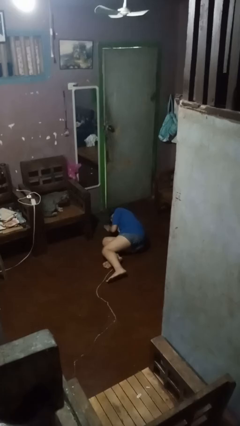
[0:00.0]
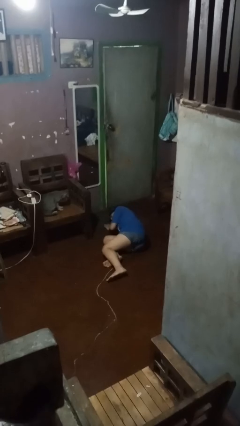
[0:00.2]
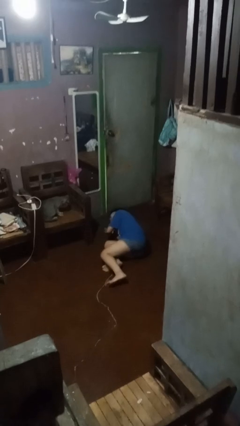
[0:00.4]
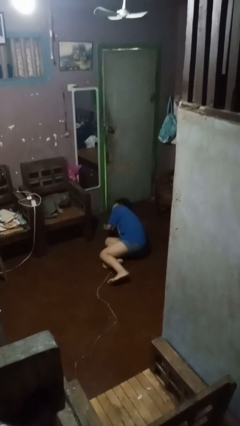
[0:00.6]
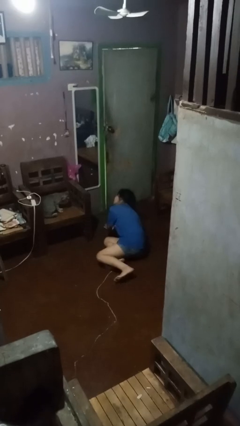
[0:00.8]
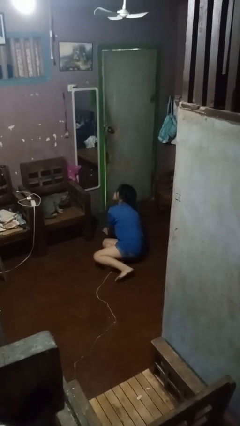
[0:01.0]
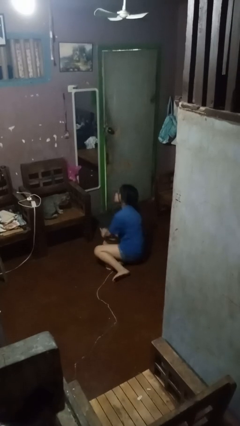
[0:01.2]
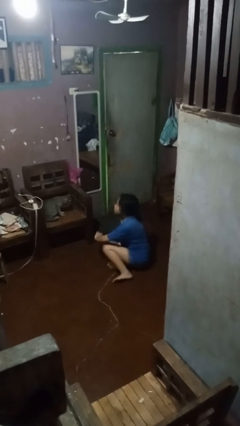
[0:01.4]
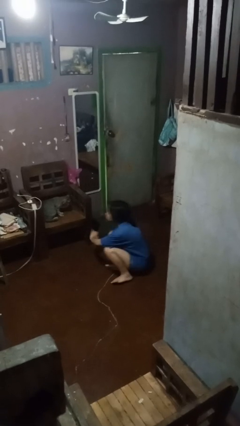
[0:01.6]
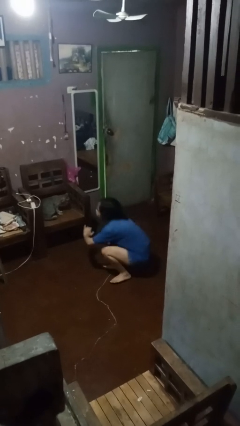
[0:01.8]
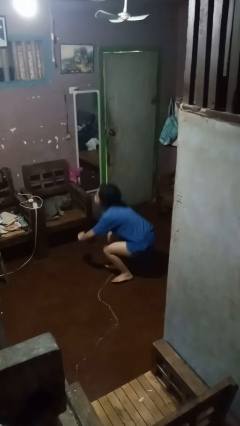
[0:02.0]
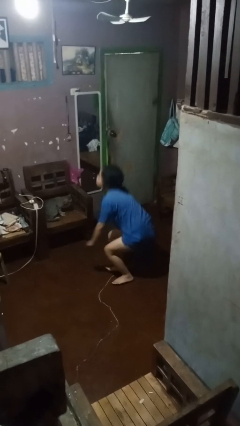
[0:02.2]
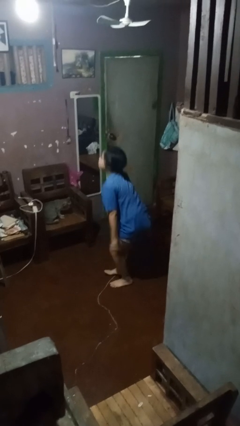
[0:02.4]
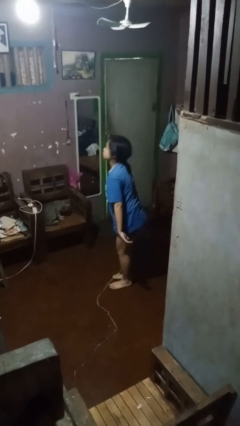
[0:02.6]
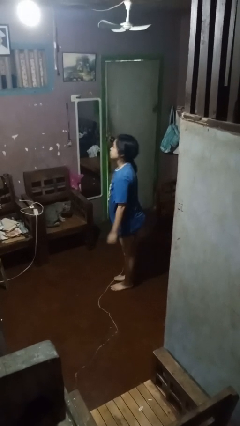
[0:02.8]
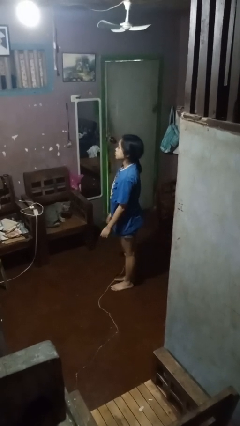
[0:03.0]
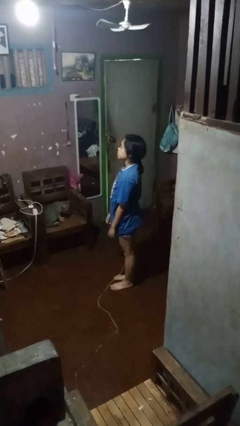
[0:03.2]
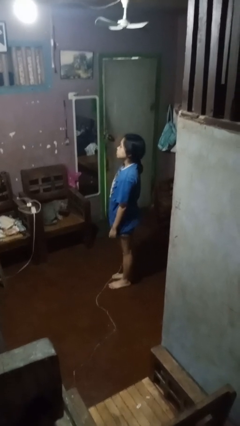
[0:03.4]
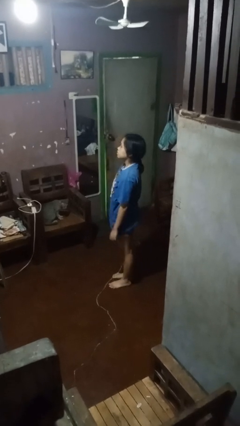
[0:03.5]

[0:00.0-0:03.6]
person stands up from floor

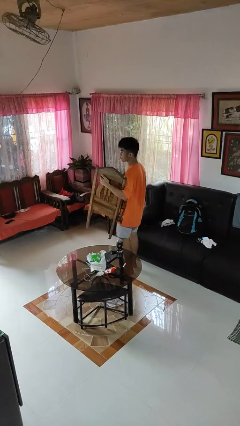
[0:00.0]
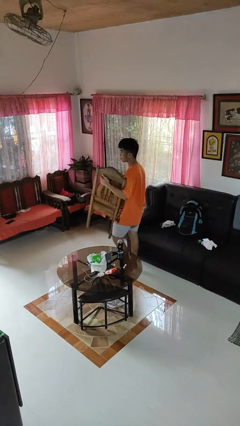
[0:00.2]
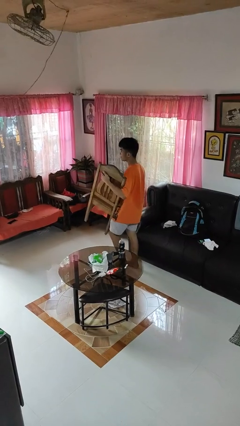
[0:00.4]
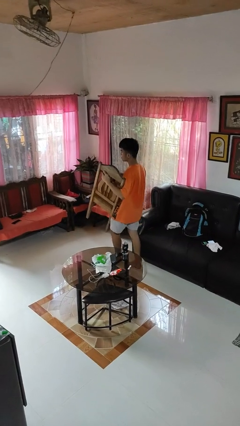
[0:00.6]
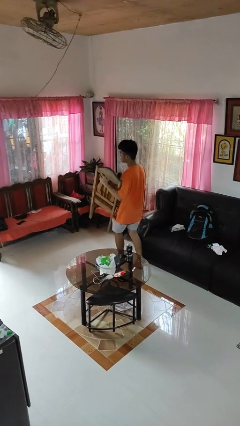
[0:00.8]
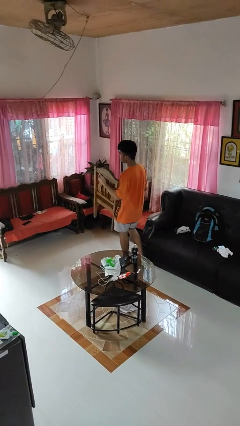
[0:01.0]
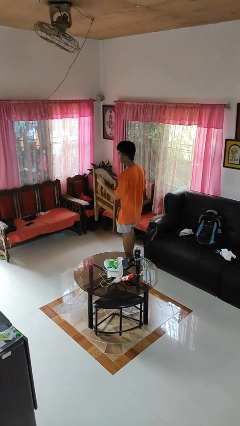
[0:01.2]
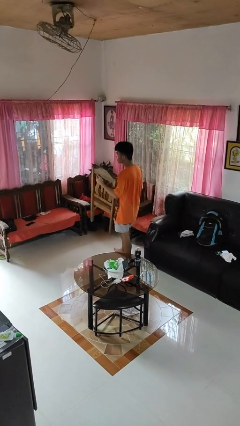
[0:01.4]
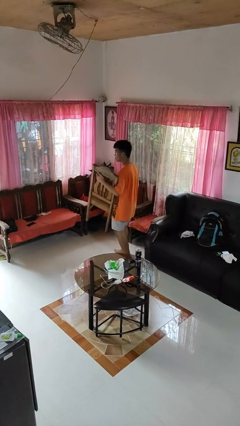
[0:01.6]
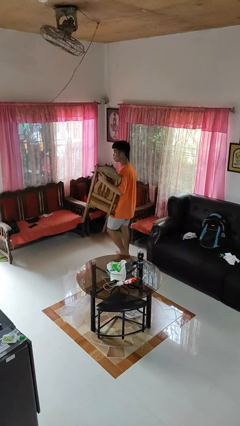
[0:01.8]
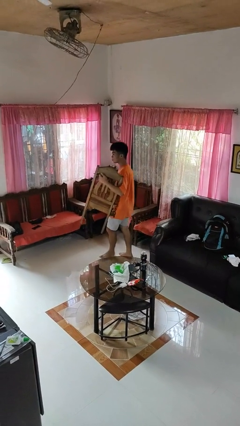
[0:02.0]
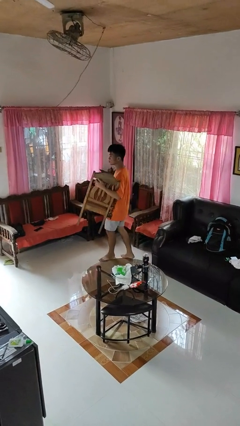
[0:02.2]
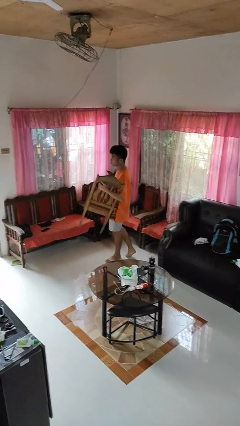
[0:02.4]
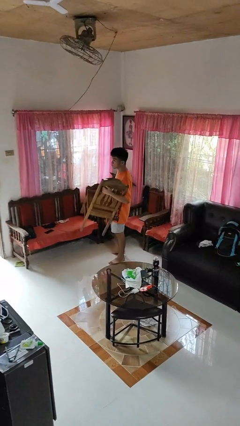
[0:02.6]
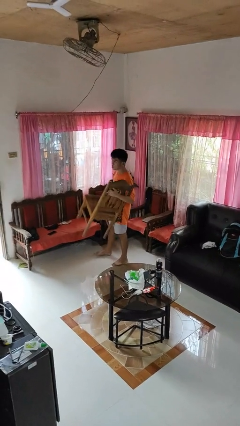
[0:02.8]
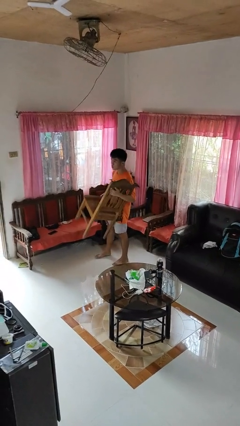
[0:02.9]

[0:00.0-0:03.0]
person carries furniture

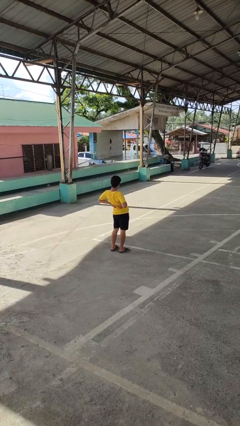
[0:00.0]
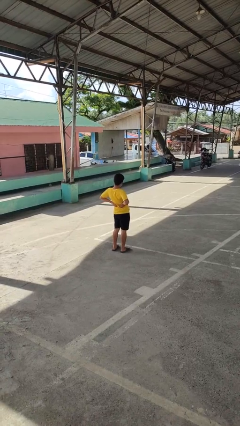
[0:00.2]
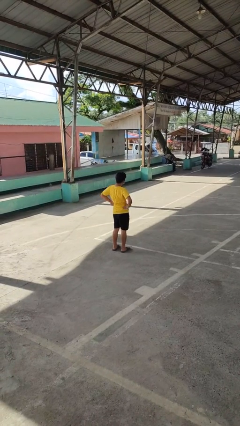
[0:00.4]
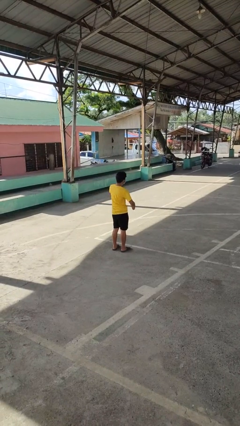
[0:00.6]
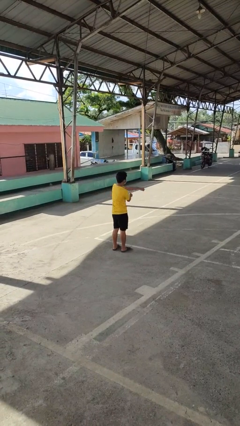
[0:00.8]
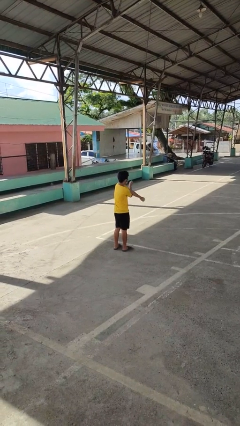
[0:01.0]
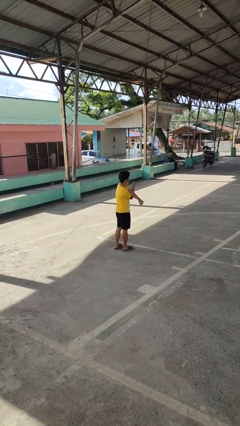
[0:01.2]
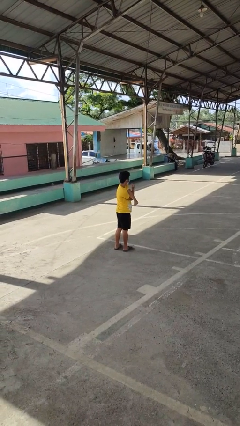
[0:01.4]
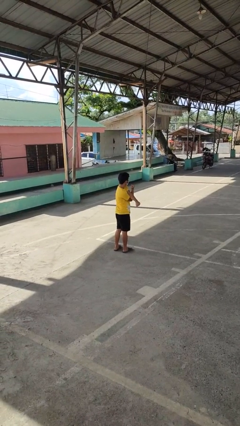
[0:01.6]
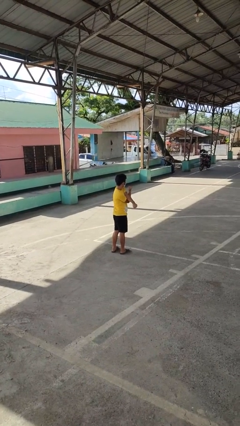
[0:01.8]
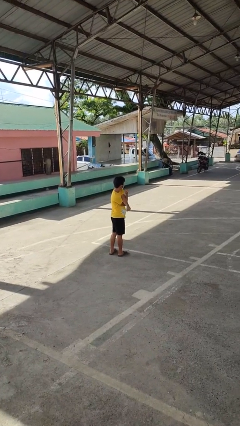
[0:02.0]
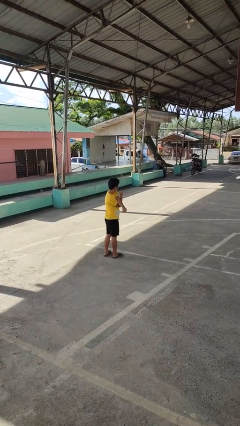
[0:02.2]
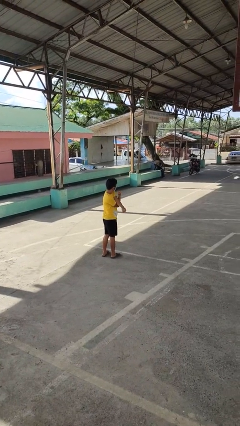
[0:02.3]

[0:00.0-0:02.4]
person stretches arms to side

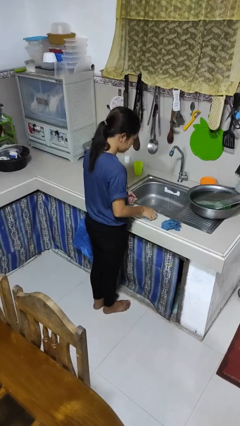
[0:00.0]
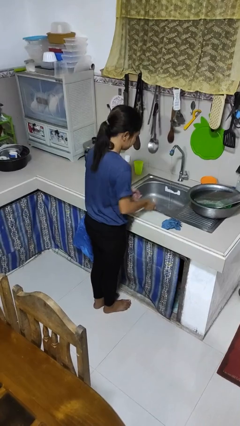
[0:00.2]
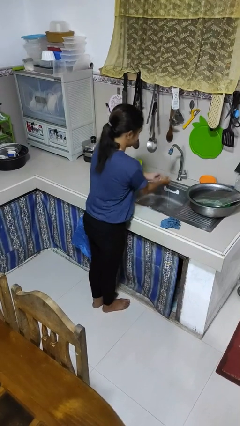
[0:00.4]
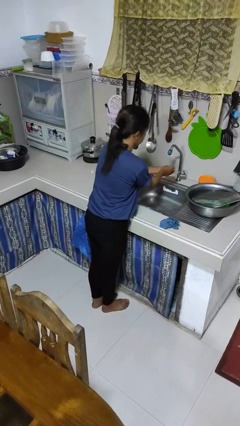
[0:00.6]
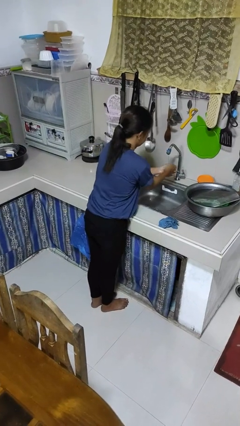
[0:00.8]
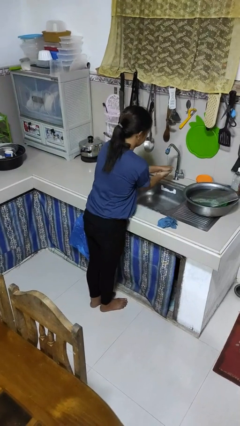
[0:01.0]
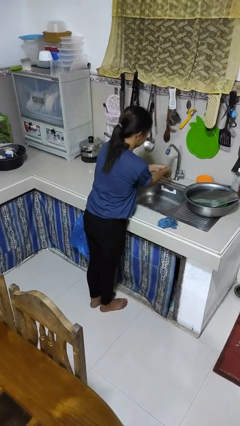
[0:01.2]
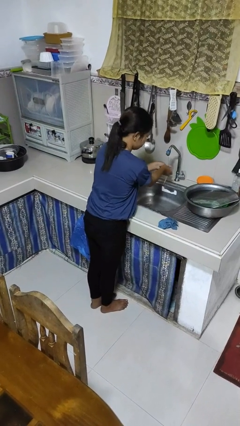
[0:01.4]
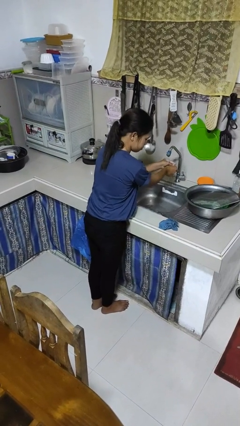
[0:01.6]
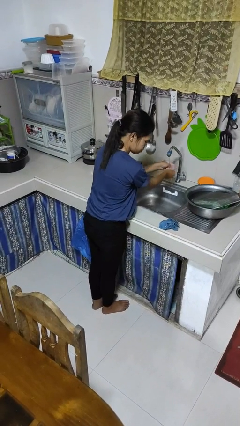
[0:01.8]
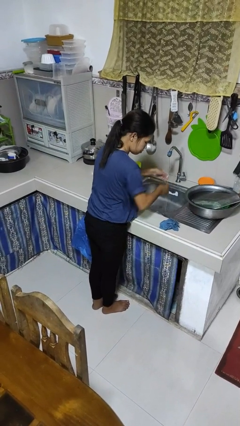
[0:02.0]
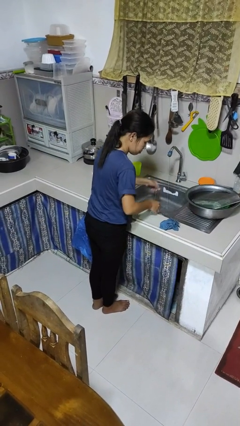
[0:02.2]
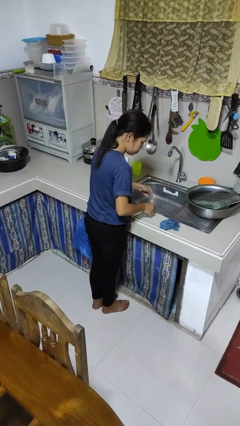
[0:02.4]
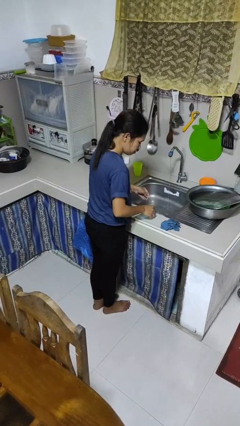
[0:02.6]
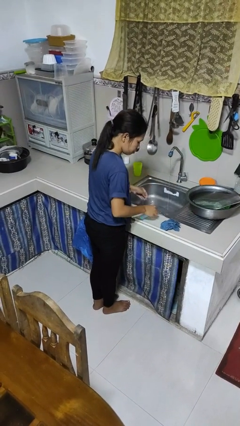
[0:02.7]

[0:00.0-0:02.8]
person washes hands

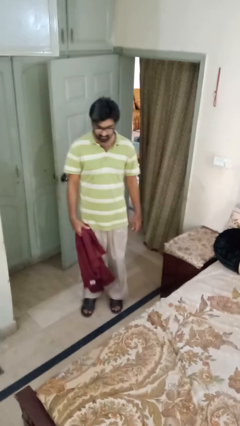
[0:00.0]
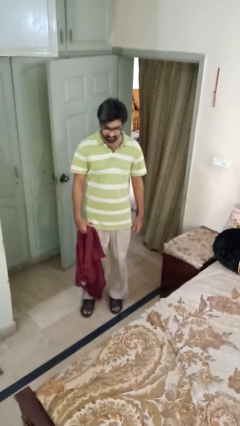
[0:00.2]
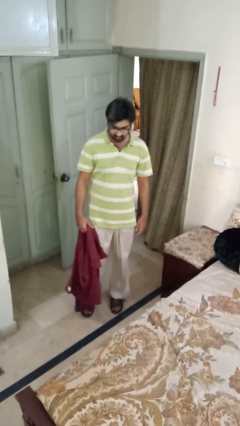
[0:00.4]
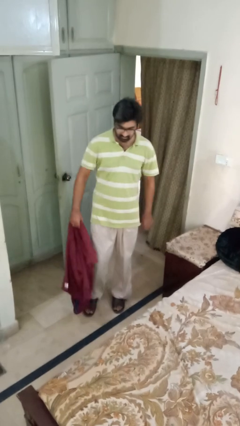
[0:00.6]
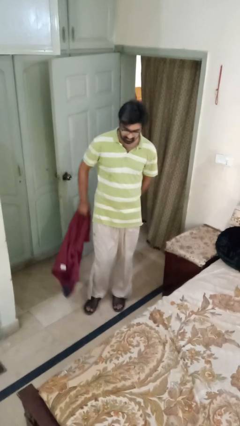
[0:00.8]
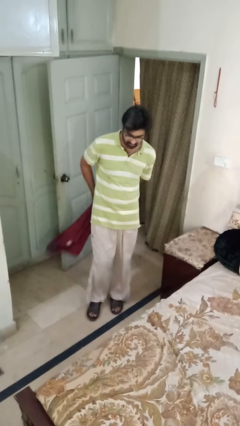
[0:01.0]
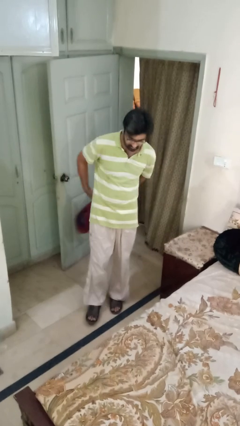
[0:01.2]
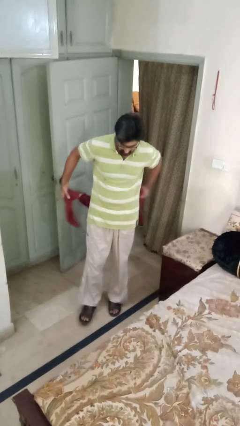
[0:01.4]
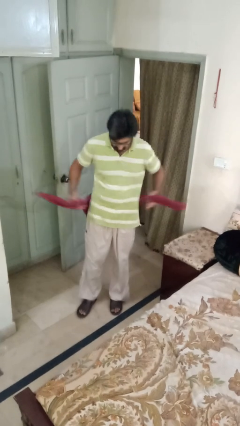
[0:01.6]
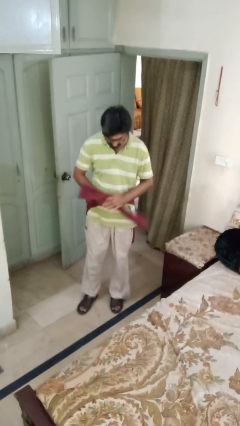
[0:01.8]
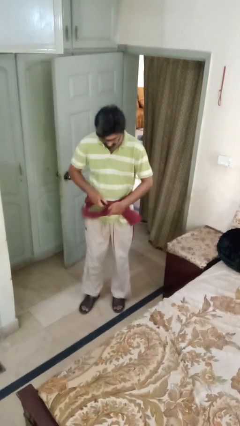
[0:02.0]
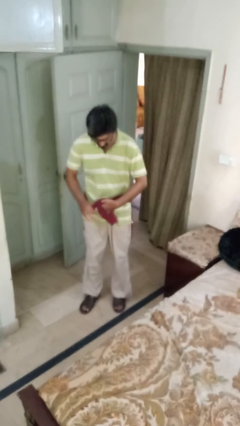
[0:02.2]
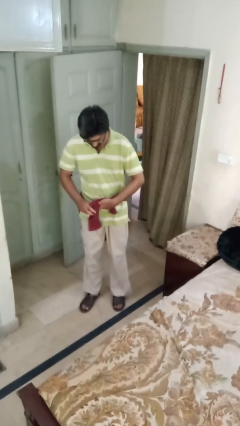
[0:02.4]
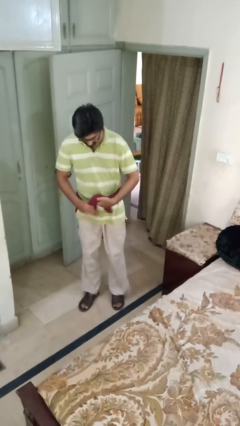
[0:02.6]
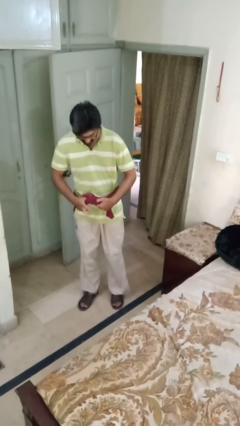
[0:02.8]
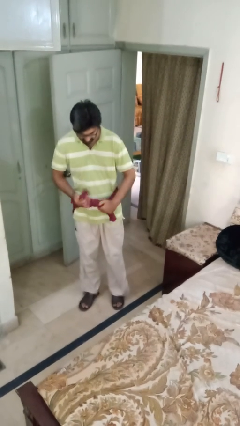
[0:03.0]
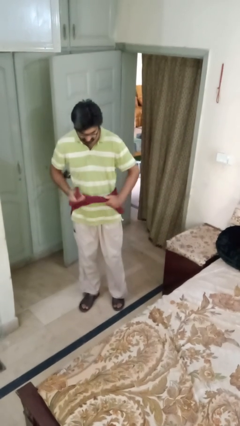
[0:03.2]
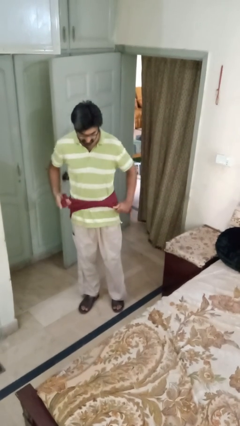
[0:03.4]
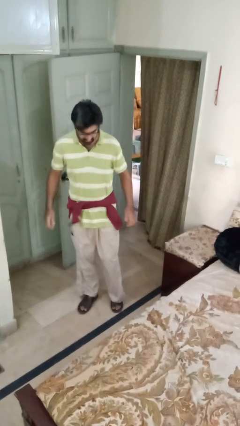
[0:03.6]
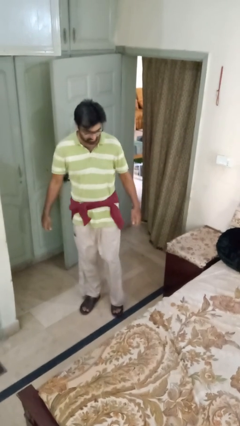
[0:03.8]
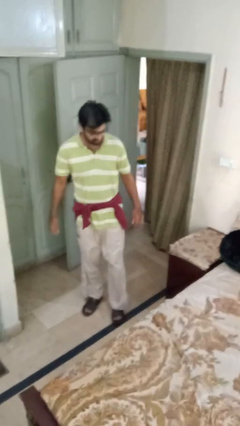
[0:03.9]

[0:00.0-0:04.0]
person ties jacket around waist

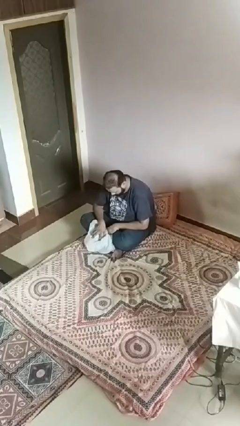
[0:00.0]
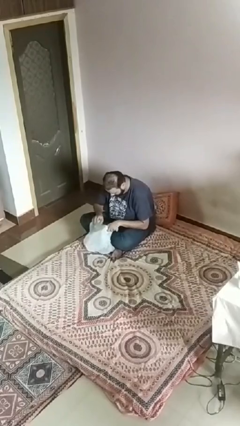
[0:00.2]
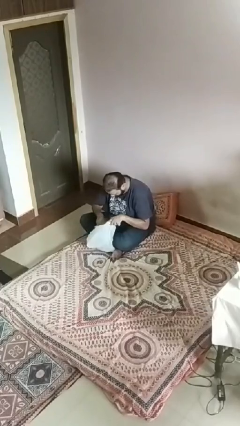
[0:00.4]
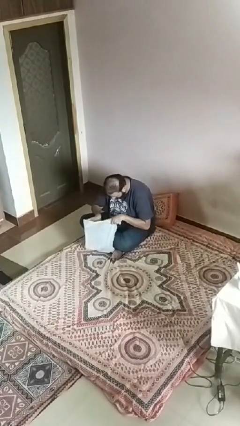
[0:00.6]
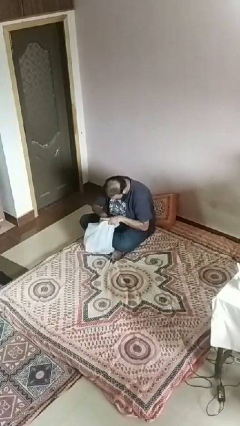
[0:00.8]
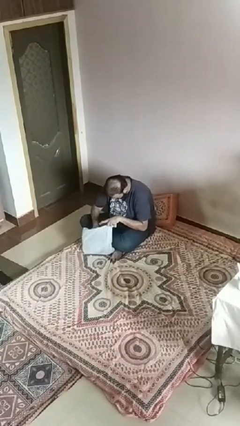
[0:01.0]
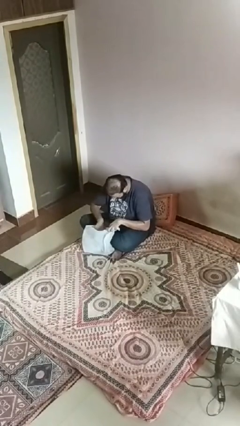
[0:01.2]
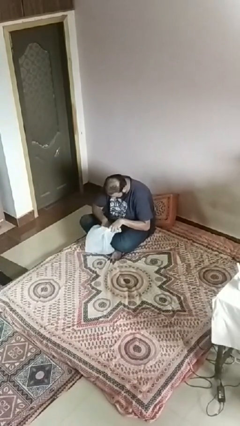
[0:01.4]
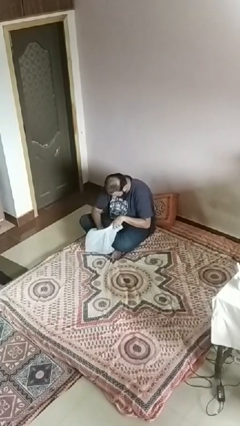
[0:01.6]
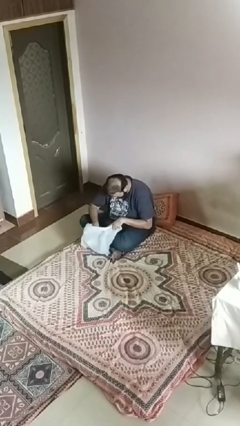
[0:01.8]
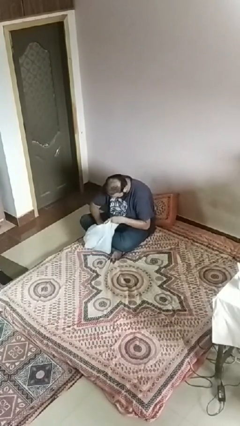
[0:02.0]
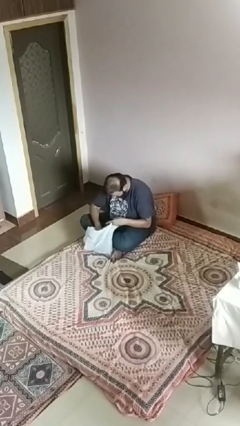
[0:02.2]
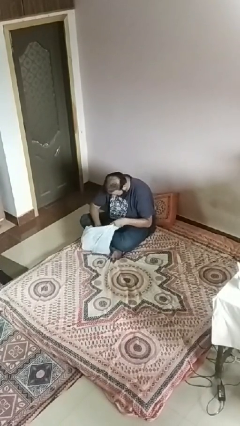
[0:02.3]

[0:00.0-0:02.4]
person searches in bag
